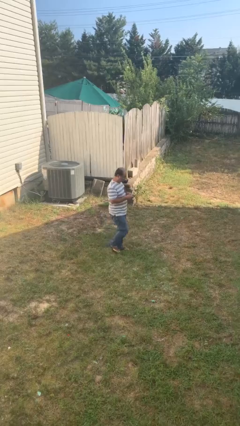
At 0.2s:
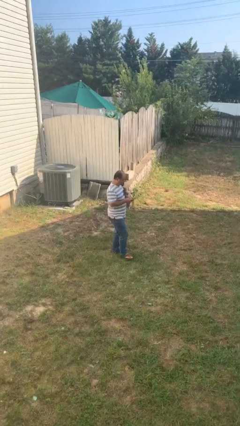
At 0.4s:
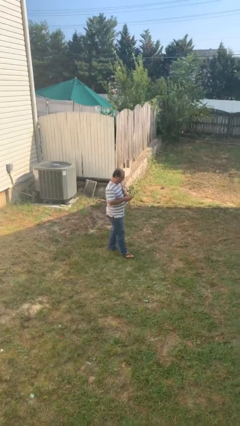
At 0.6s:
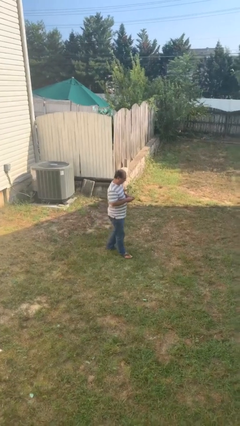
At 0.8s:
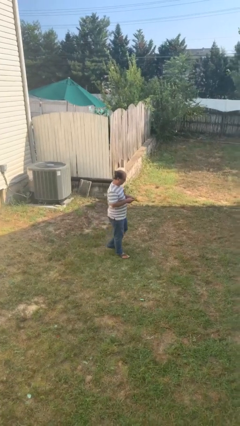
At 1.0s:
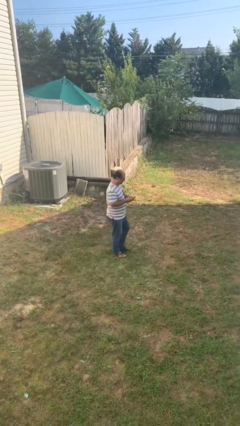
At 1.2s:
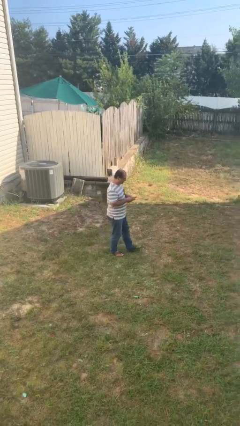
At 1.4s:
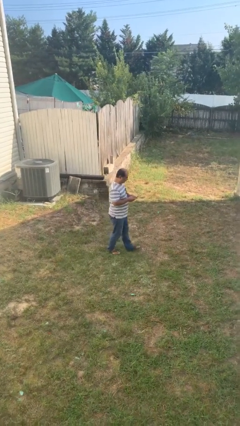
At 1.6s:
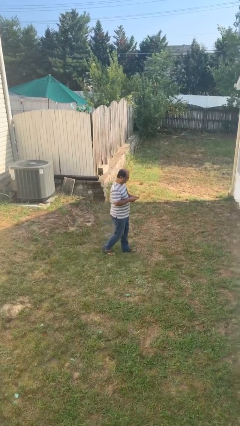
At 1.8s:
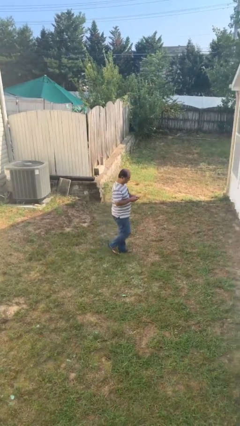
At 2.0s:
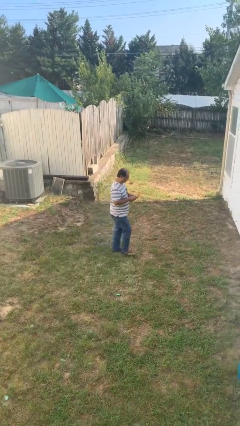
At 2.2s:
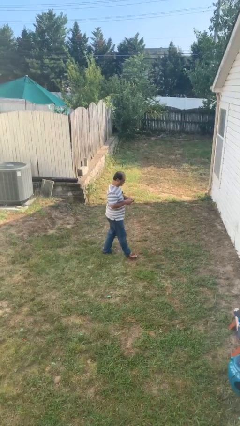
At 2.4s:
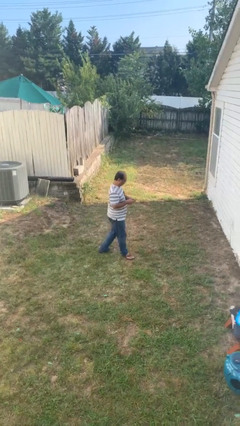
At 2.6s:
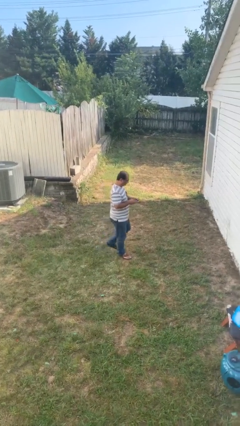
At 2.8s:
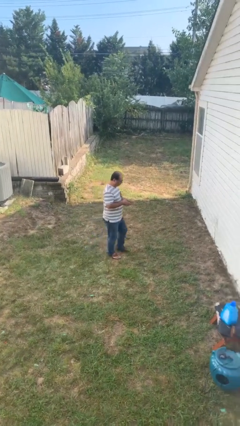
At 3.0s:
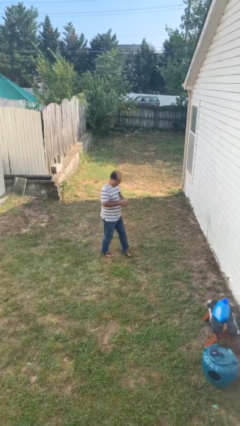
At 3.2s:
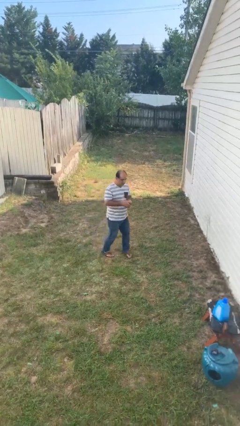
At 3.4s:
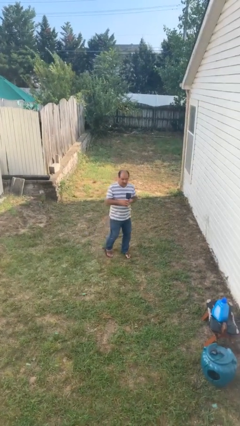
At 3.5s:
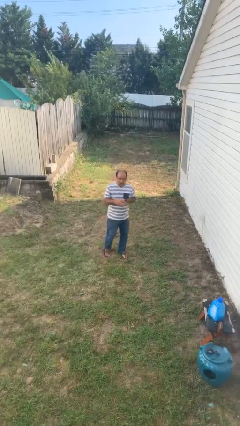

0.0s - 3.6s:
person texts on phone

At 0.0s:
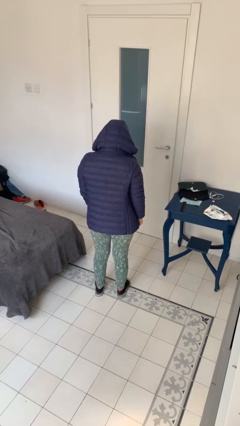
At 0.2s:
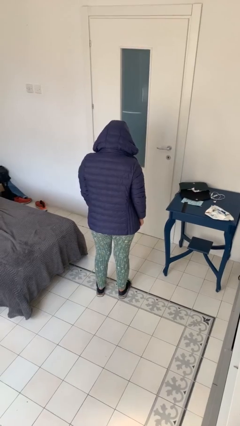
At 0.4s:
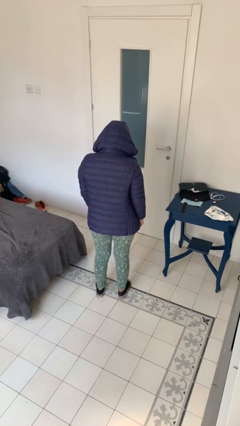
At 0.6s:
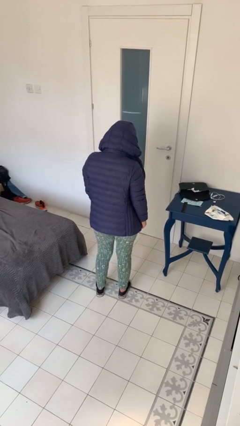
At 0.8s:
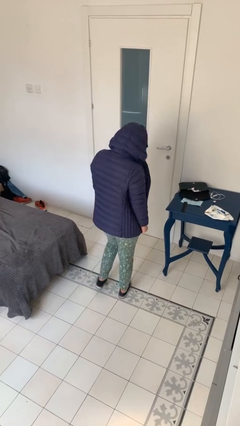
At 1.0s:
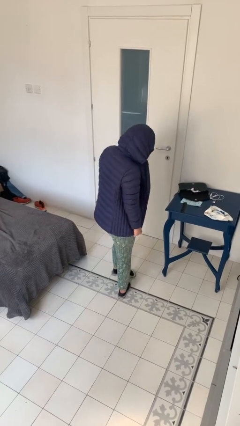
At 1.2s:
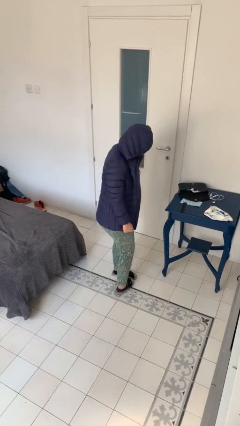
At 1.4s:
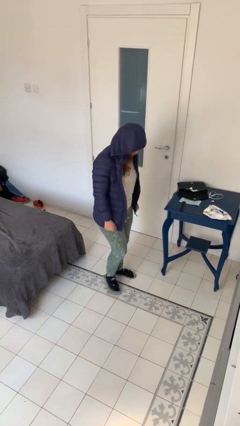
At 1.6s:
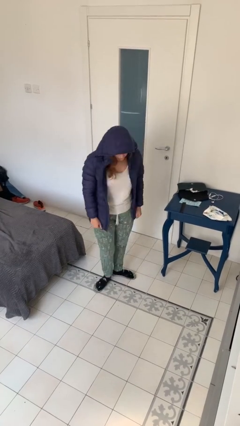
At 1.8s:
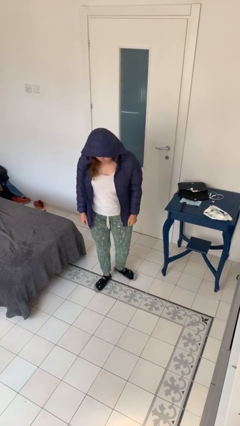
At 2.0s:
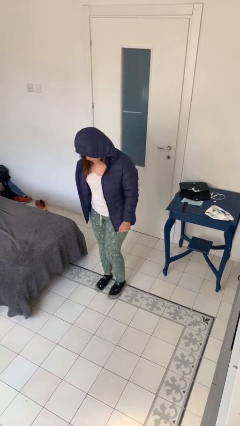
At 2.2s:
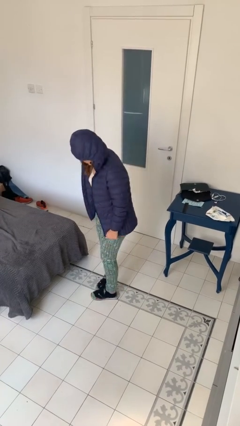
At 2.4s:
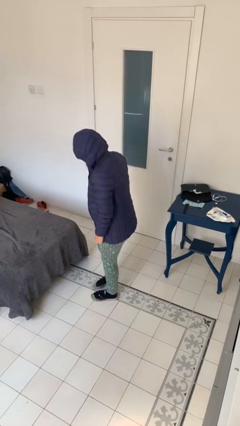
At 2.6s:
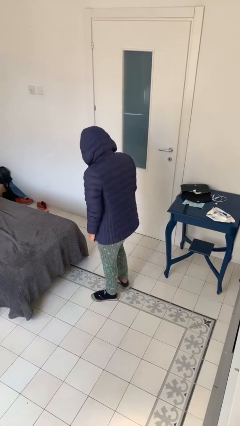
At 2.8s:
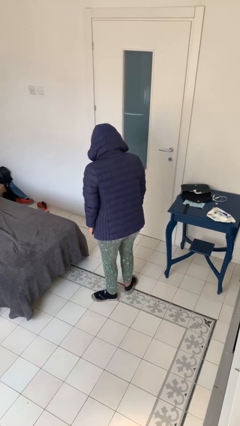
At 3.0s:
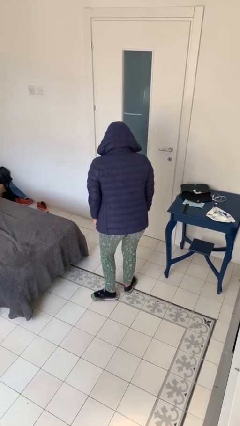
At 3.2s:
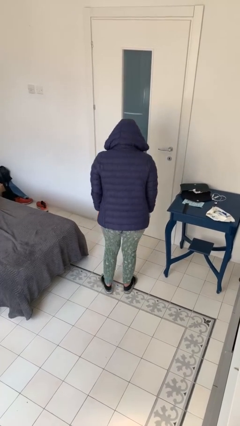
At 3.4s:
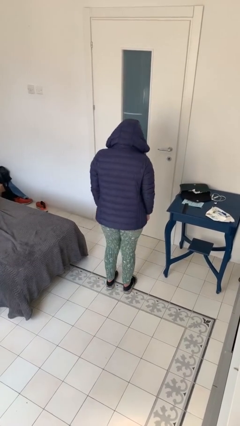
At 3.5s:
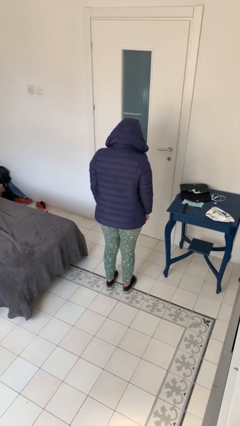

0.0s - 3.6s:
person twirls

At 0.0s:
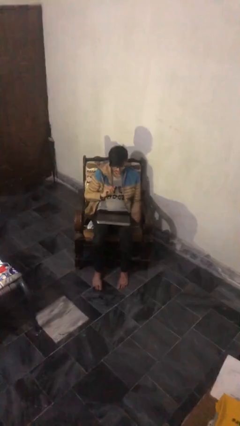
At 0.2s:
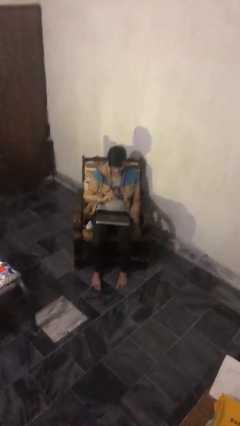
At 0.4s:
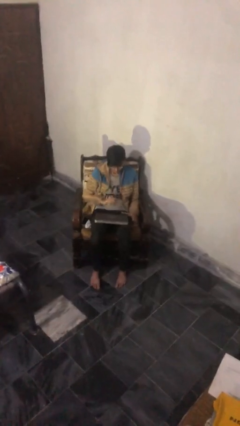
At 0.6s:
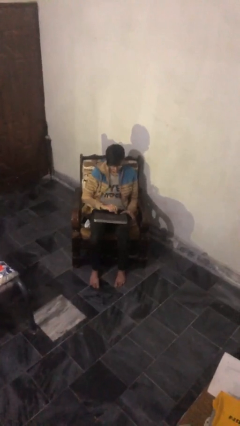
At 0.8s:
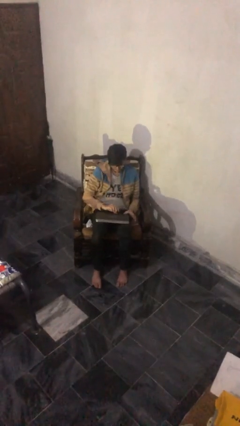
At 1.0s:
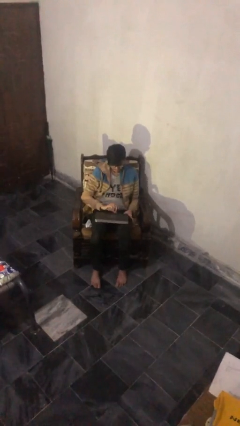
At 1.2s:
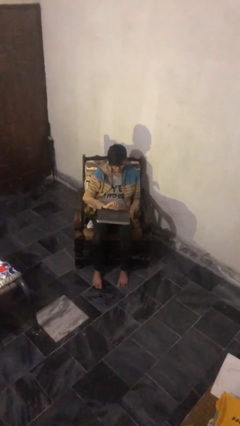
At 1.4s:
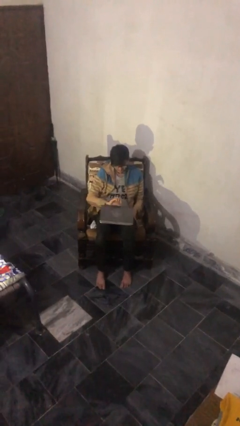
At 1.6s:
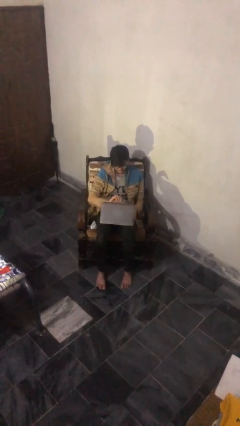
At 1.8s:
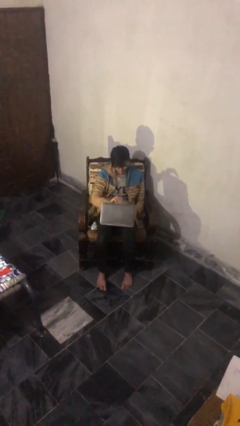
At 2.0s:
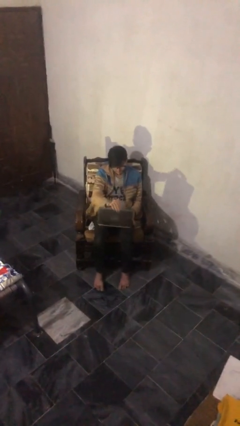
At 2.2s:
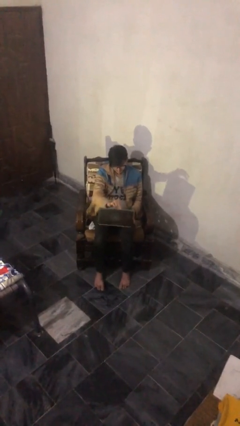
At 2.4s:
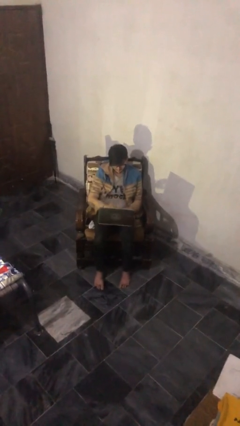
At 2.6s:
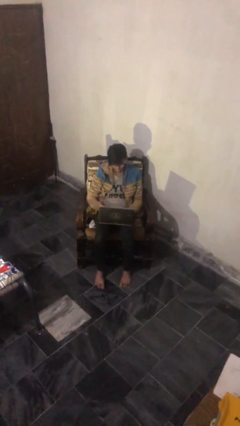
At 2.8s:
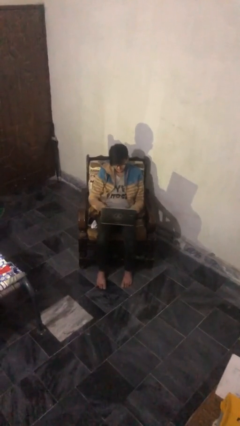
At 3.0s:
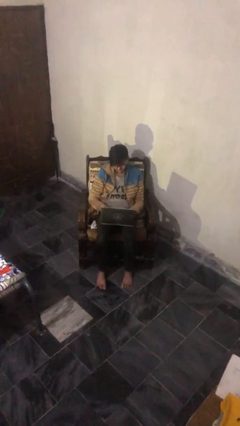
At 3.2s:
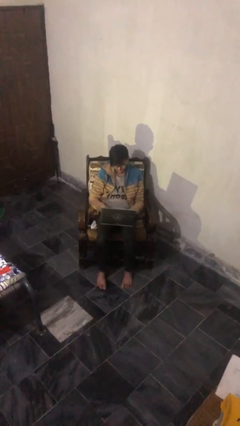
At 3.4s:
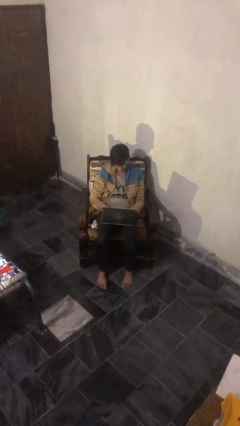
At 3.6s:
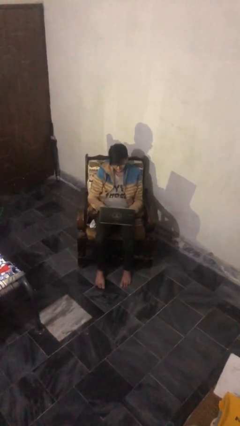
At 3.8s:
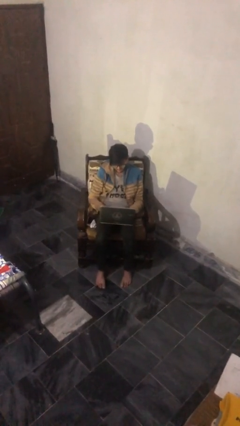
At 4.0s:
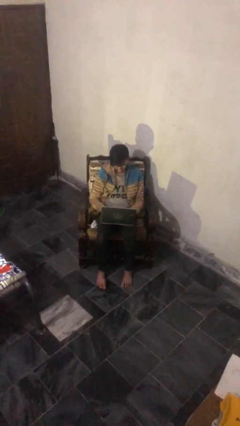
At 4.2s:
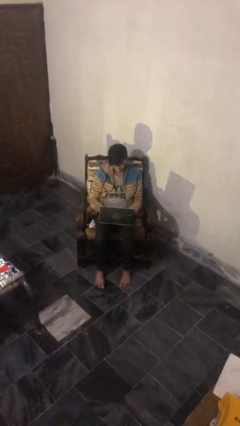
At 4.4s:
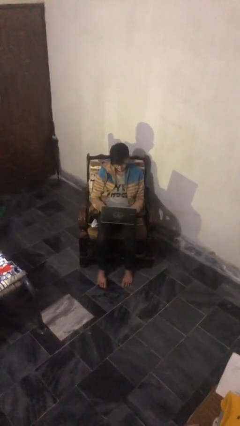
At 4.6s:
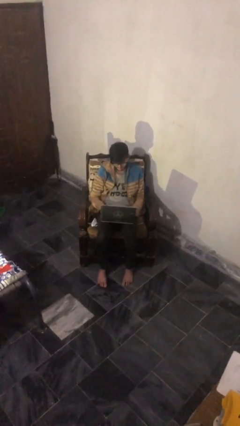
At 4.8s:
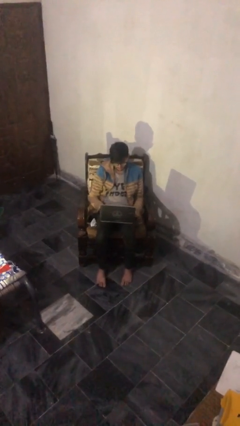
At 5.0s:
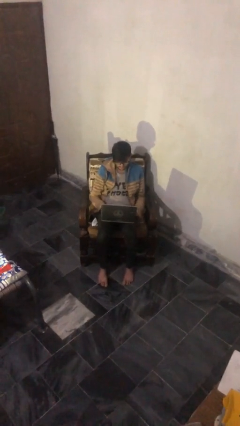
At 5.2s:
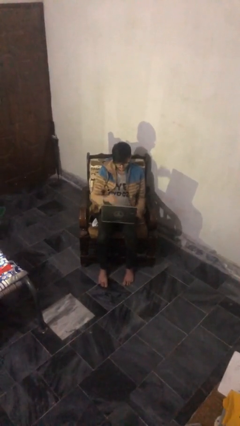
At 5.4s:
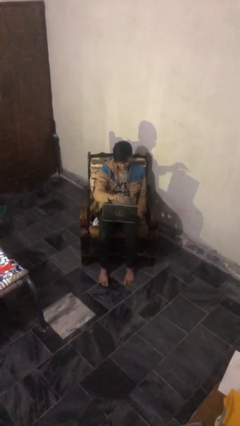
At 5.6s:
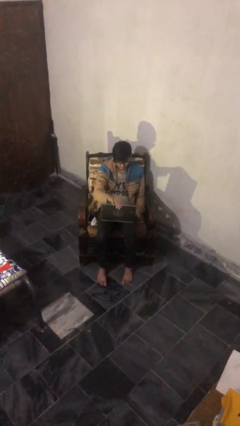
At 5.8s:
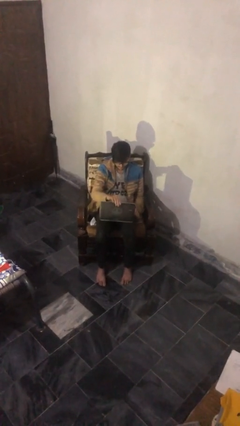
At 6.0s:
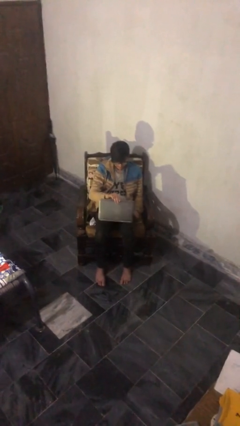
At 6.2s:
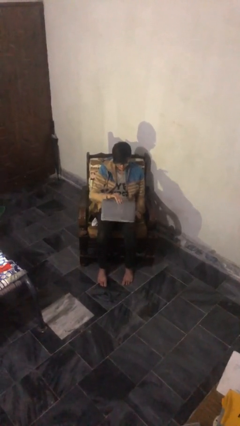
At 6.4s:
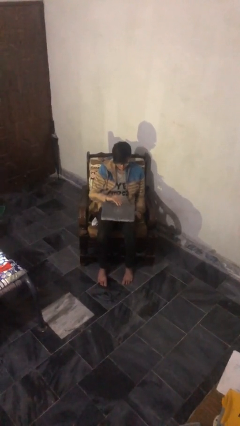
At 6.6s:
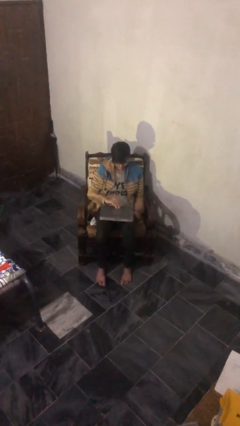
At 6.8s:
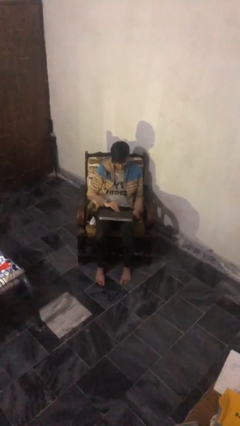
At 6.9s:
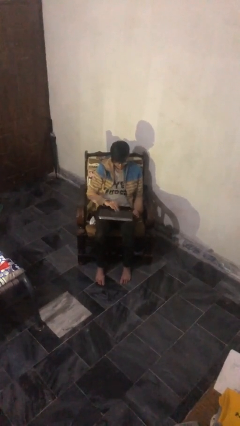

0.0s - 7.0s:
person interacts with laptop

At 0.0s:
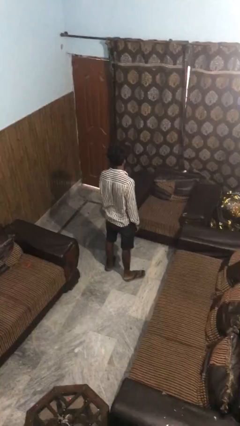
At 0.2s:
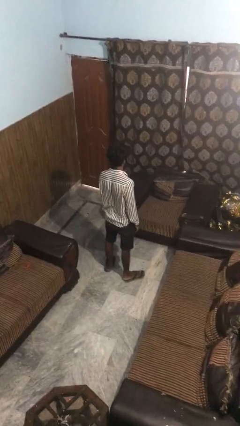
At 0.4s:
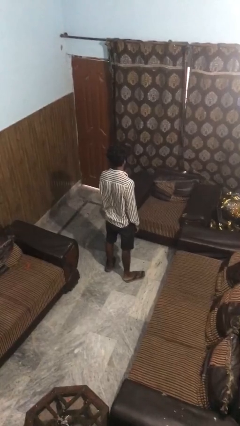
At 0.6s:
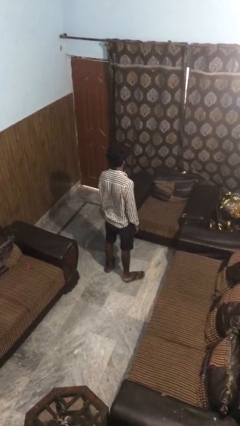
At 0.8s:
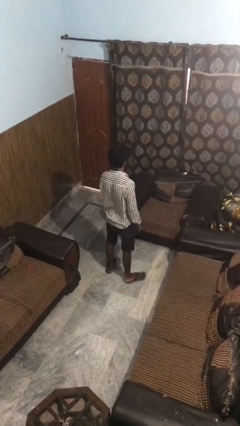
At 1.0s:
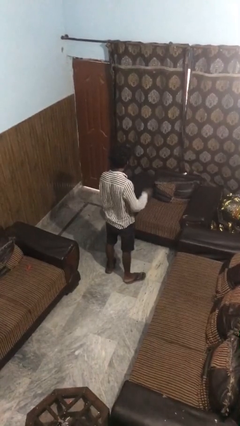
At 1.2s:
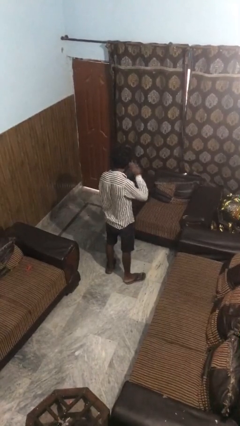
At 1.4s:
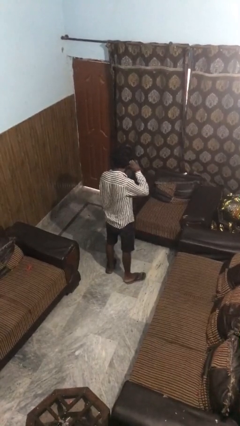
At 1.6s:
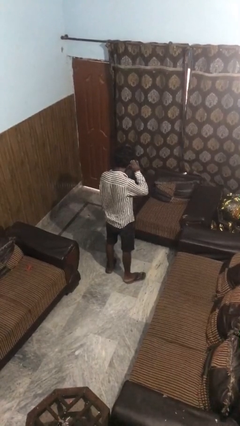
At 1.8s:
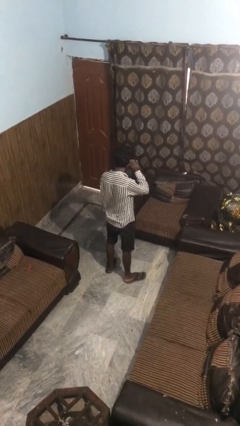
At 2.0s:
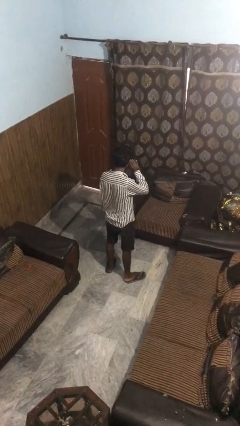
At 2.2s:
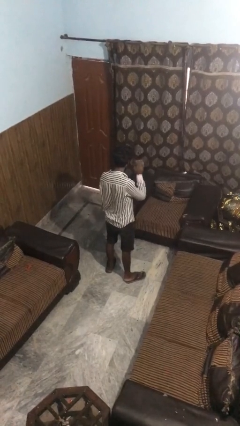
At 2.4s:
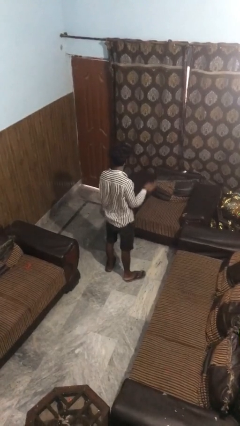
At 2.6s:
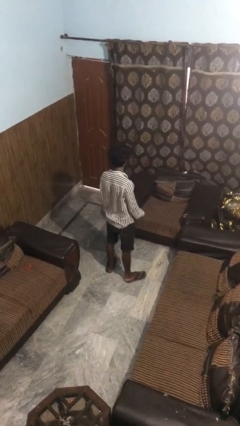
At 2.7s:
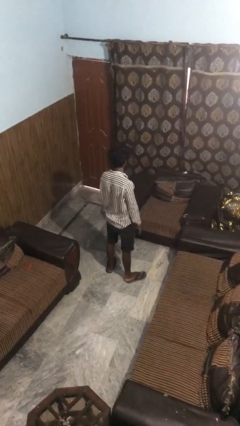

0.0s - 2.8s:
person gestures listen closely

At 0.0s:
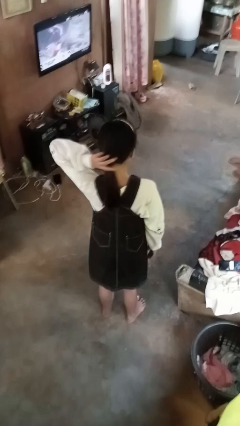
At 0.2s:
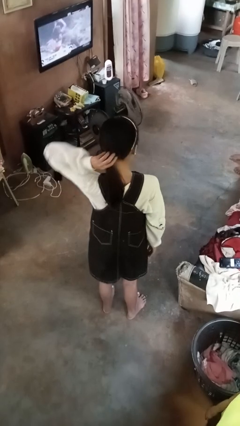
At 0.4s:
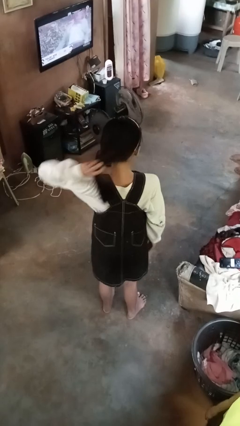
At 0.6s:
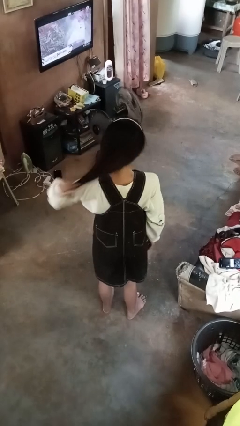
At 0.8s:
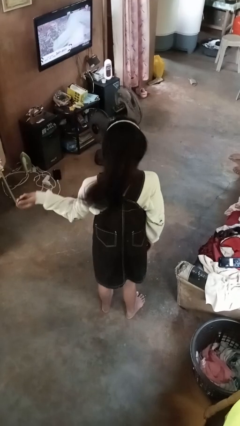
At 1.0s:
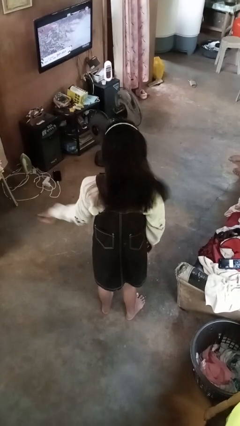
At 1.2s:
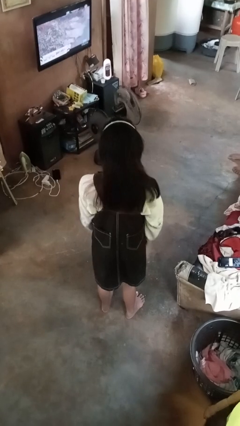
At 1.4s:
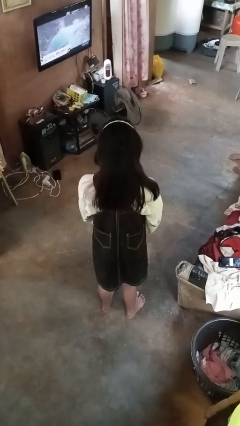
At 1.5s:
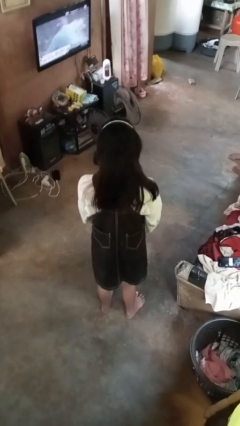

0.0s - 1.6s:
person takes off hairtie
